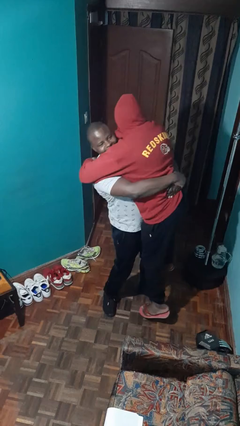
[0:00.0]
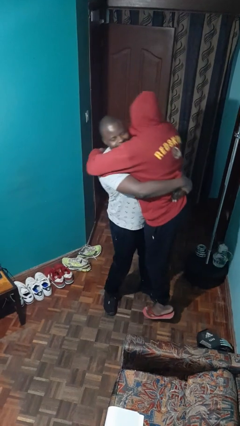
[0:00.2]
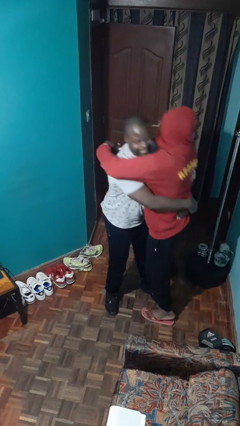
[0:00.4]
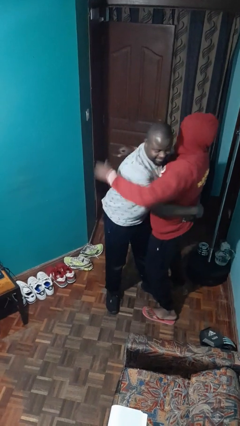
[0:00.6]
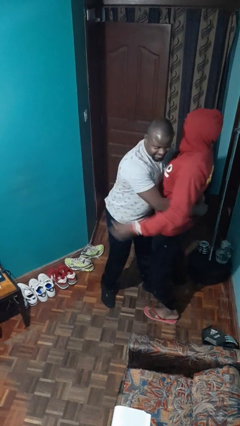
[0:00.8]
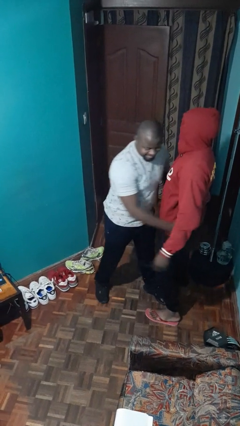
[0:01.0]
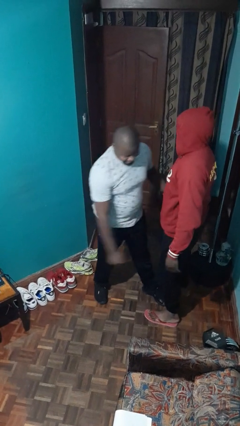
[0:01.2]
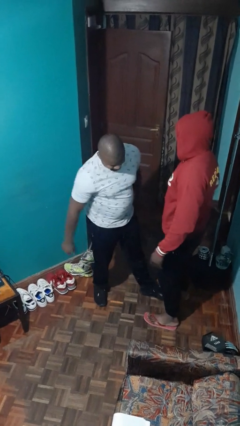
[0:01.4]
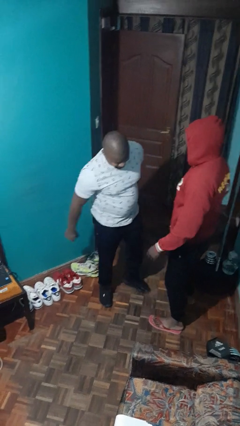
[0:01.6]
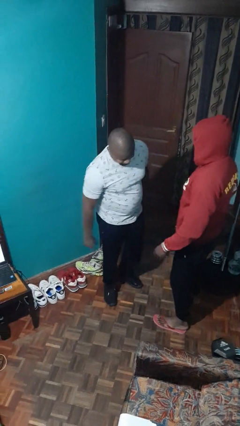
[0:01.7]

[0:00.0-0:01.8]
person puts down person

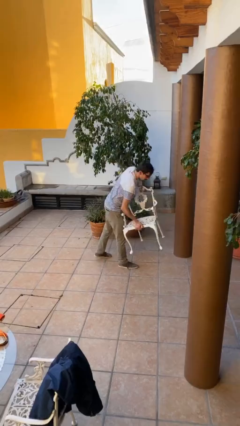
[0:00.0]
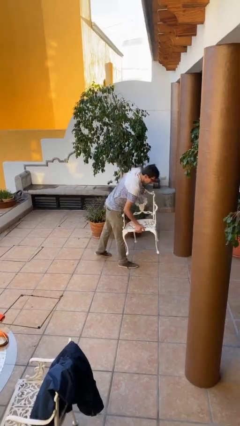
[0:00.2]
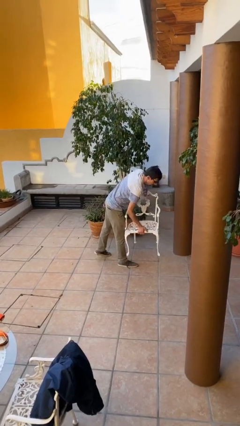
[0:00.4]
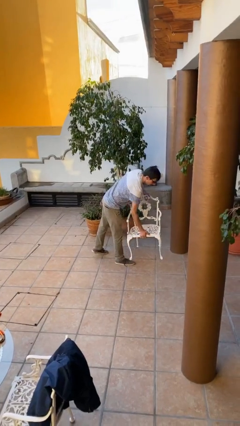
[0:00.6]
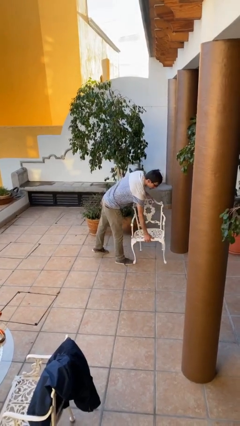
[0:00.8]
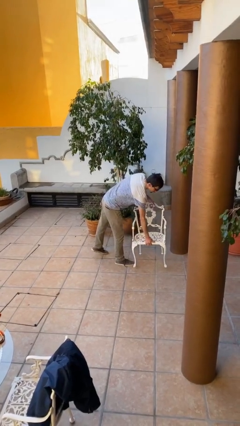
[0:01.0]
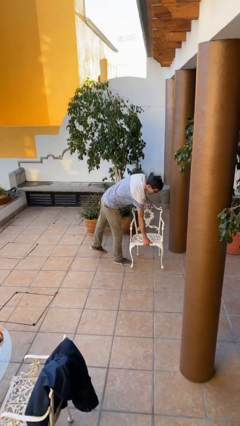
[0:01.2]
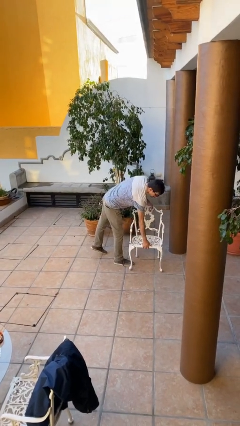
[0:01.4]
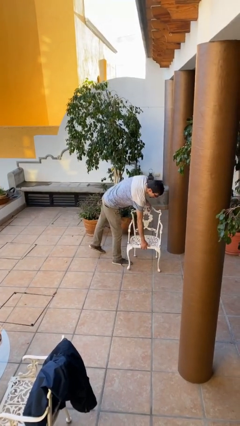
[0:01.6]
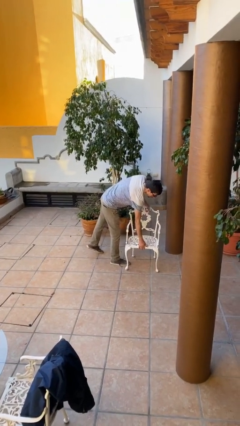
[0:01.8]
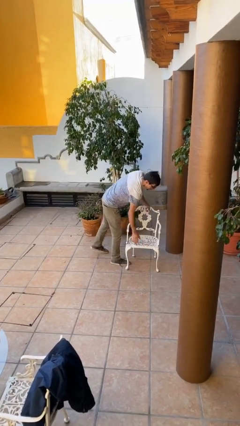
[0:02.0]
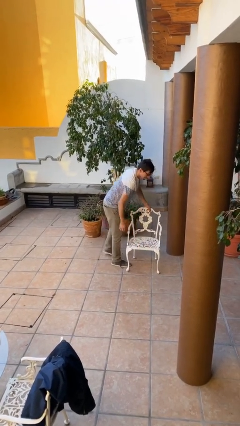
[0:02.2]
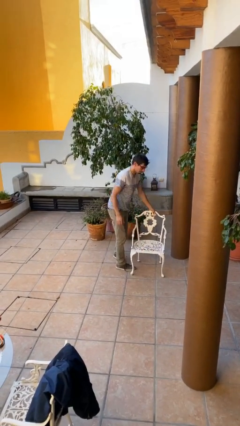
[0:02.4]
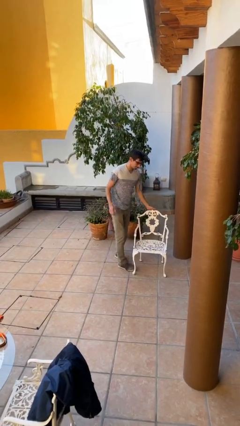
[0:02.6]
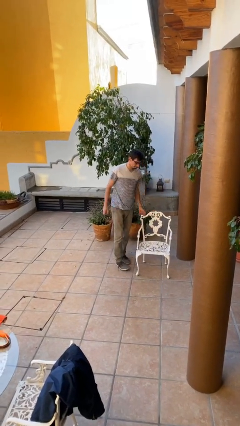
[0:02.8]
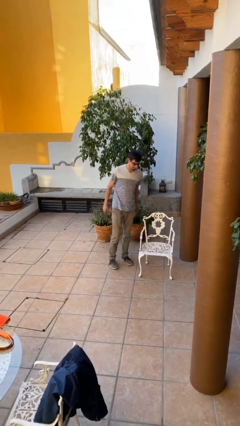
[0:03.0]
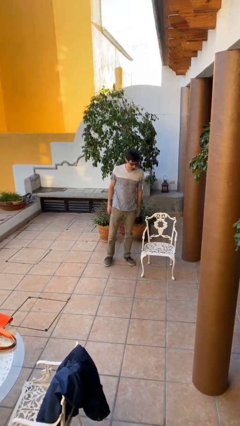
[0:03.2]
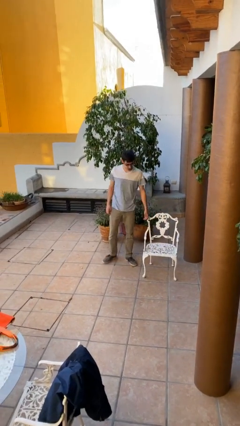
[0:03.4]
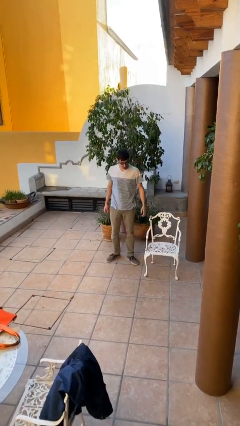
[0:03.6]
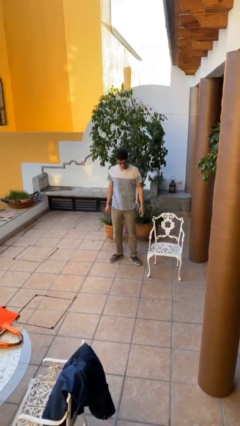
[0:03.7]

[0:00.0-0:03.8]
person puts down object on floor

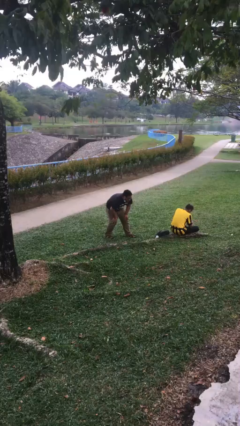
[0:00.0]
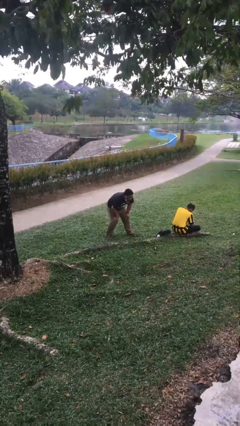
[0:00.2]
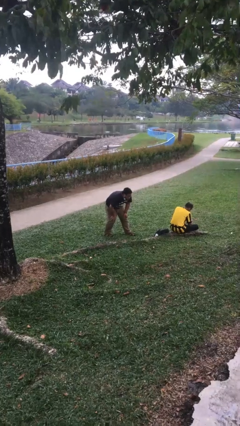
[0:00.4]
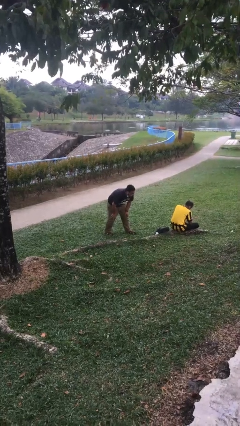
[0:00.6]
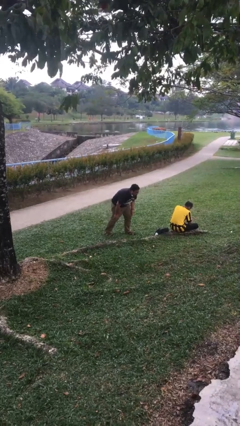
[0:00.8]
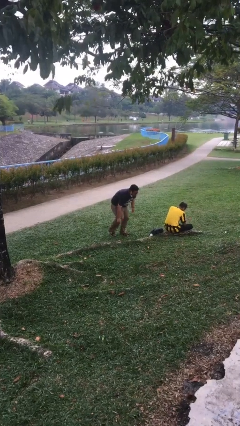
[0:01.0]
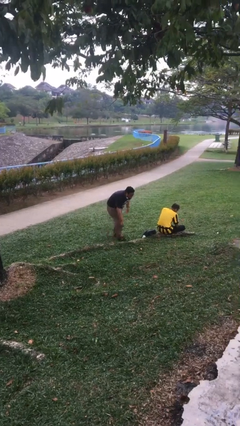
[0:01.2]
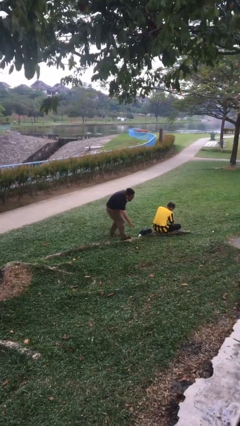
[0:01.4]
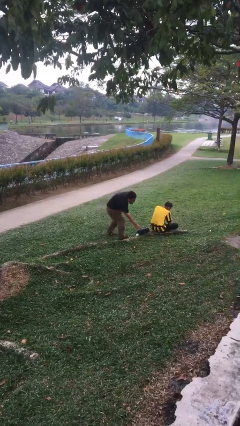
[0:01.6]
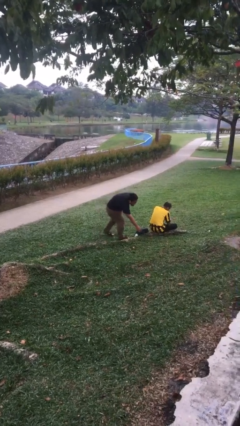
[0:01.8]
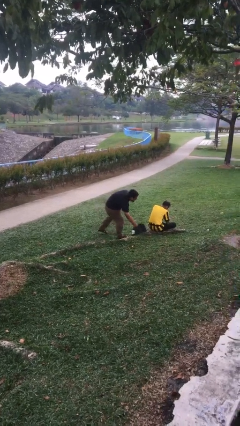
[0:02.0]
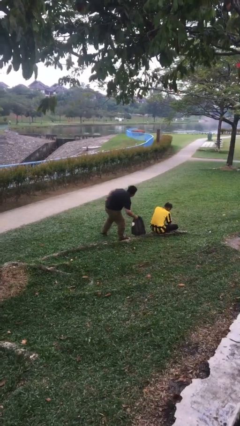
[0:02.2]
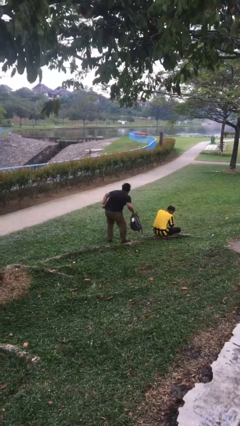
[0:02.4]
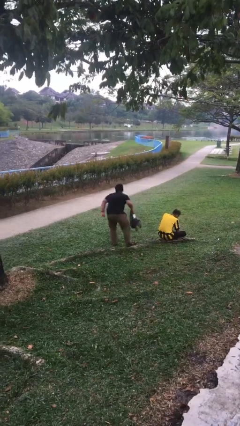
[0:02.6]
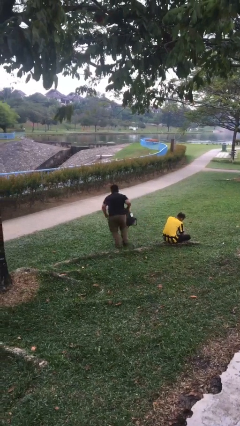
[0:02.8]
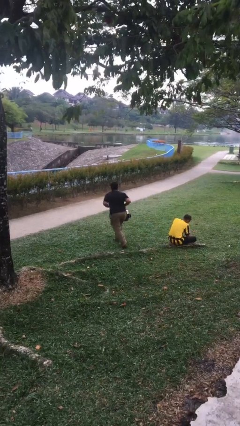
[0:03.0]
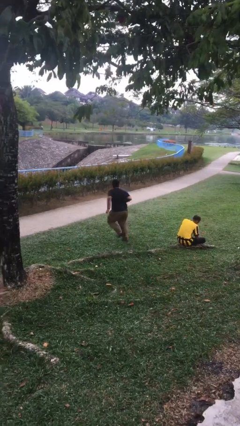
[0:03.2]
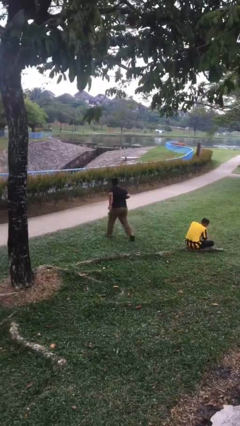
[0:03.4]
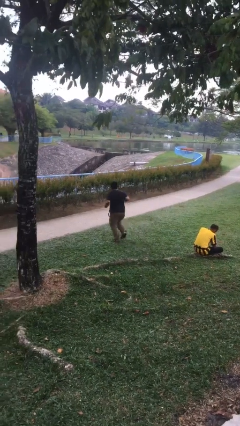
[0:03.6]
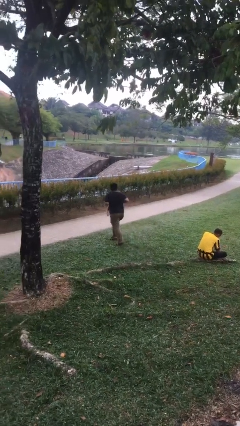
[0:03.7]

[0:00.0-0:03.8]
person steals object from person

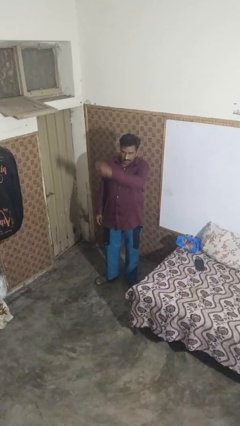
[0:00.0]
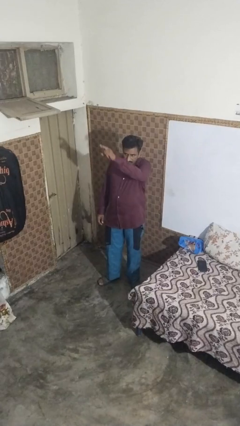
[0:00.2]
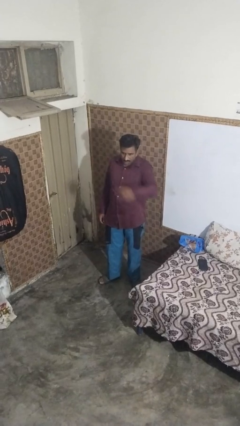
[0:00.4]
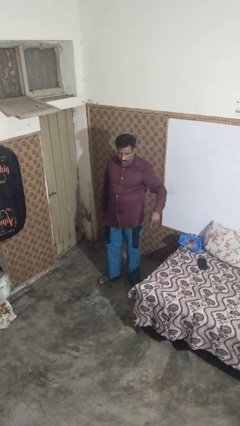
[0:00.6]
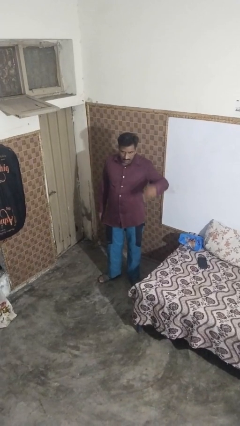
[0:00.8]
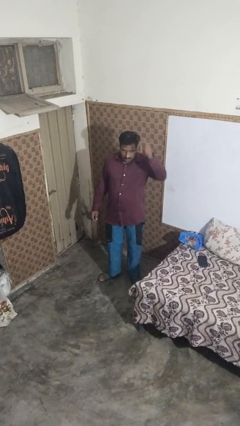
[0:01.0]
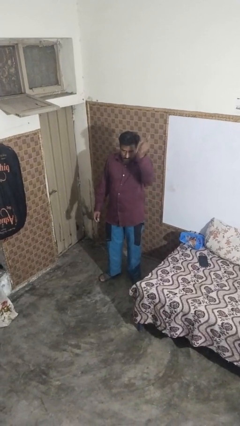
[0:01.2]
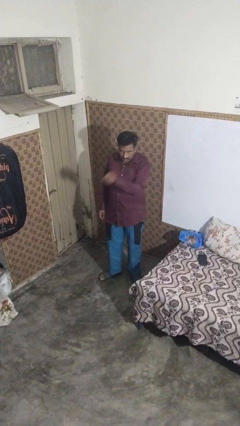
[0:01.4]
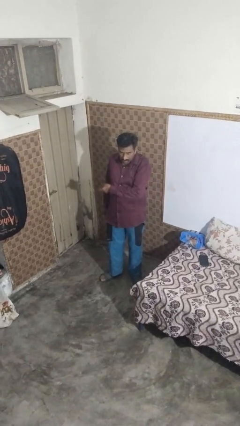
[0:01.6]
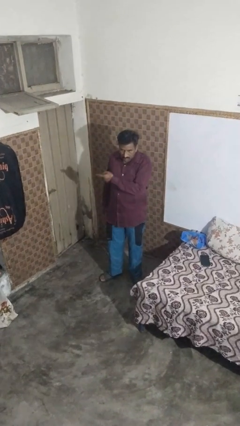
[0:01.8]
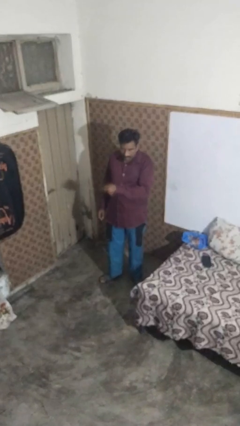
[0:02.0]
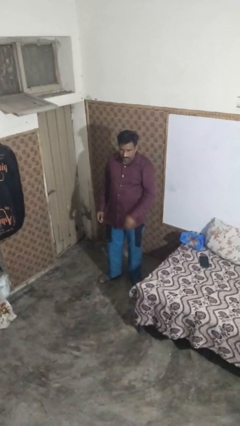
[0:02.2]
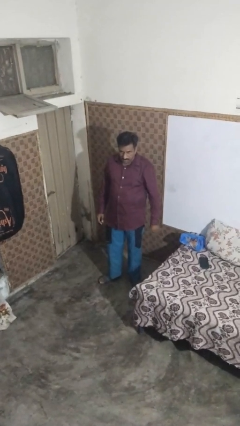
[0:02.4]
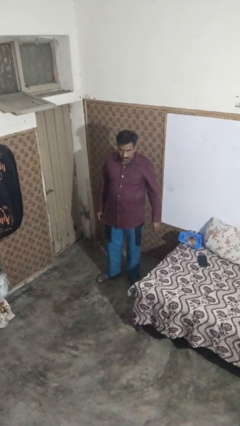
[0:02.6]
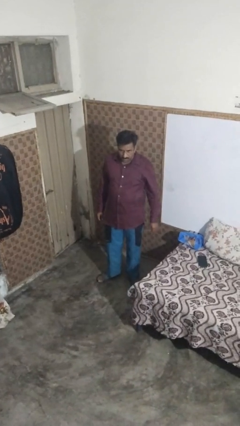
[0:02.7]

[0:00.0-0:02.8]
person gestures cut

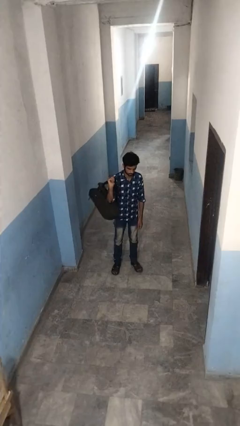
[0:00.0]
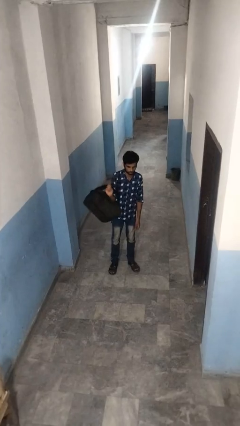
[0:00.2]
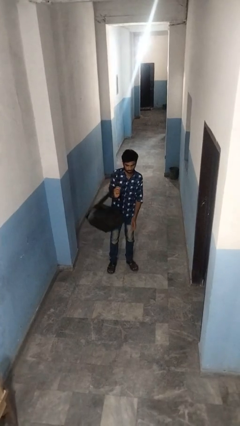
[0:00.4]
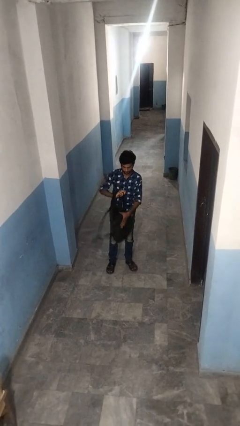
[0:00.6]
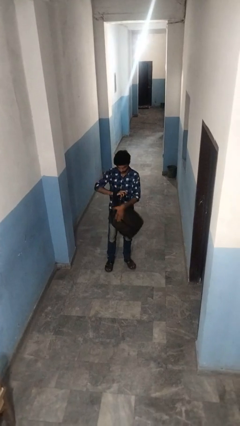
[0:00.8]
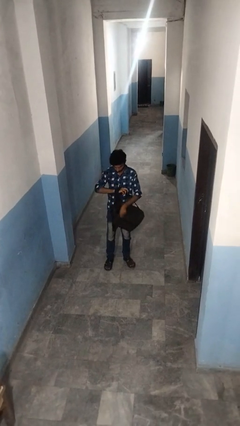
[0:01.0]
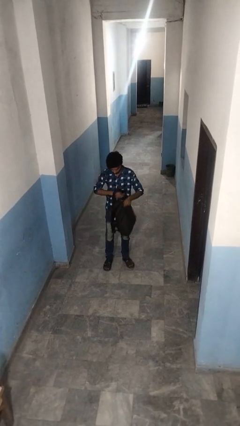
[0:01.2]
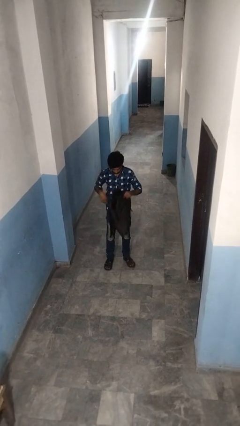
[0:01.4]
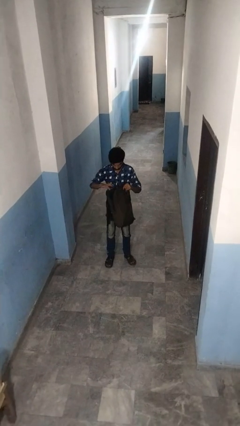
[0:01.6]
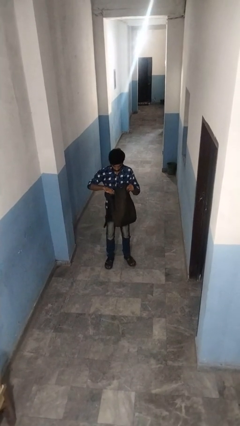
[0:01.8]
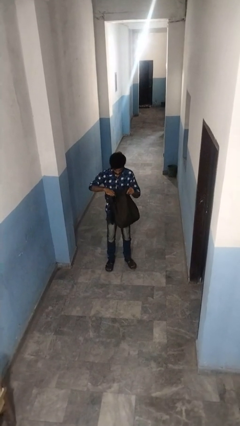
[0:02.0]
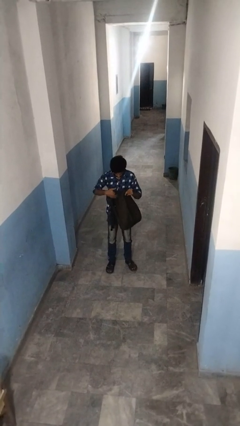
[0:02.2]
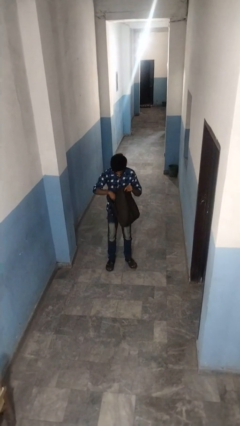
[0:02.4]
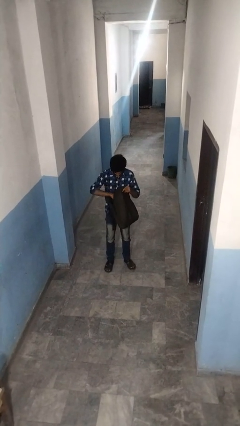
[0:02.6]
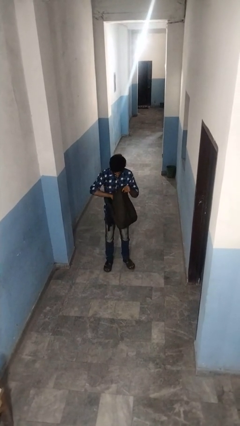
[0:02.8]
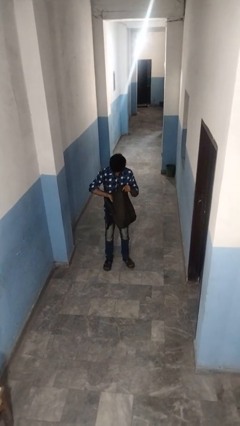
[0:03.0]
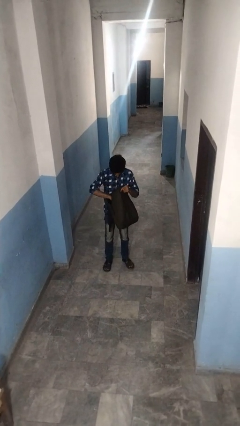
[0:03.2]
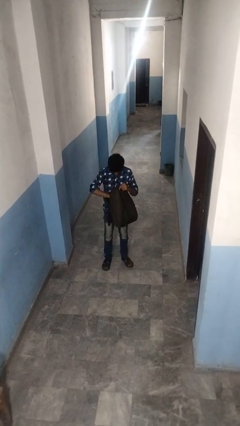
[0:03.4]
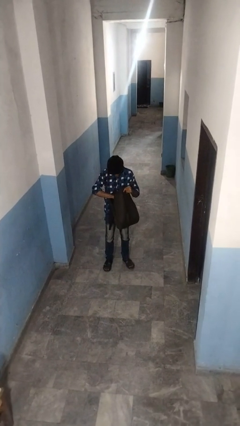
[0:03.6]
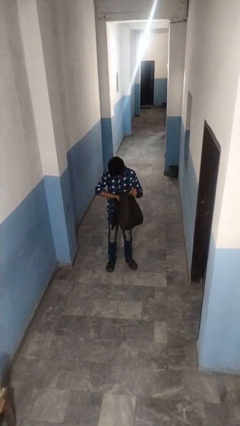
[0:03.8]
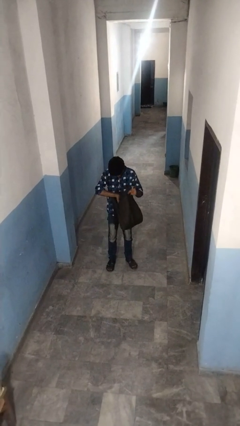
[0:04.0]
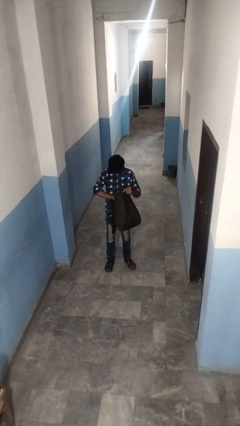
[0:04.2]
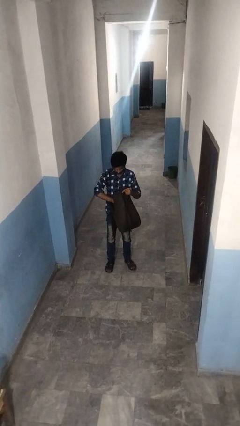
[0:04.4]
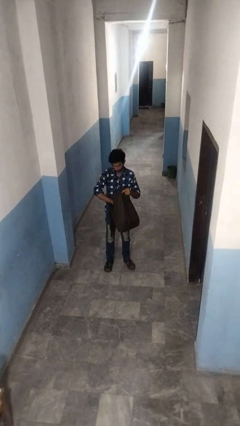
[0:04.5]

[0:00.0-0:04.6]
person searches in backpack

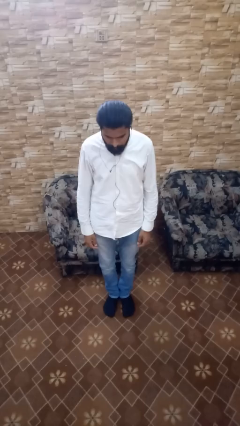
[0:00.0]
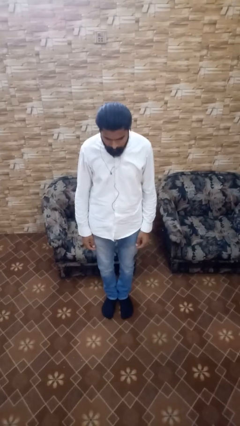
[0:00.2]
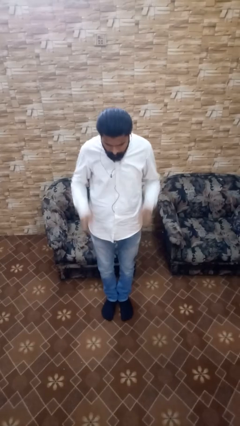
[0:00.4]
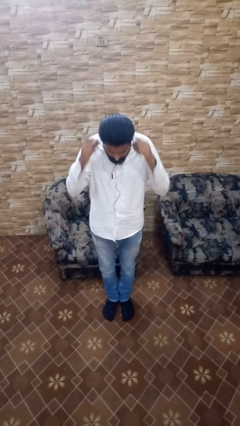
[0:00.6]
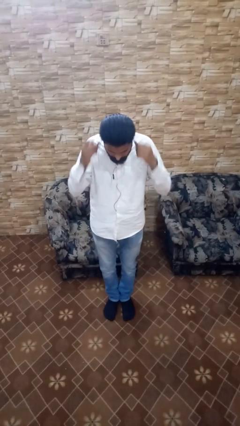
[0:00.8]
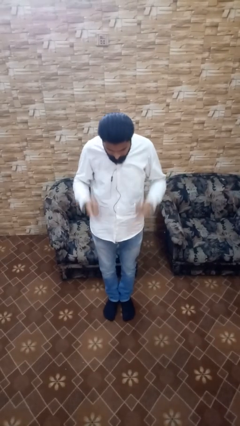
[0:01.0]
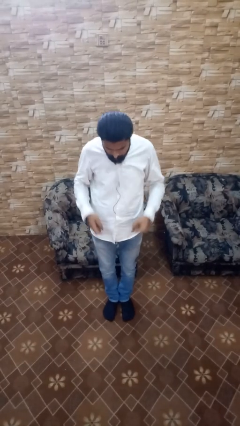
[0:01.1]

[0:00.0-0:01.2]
person takes off headphones
